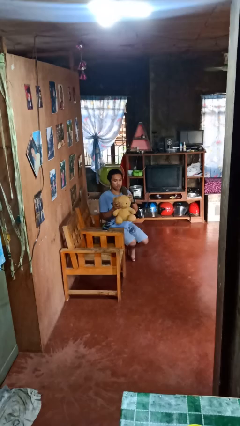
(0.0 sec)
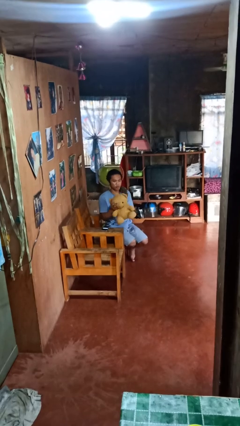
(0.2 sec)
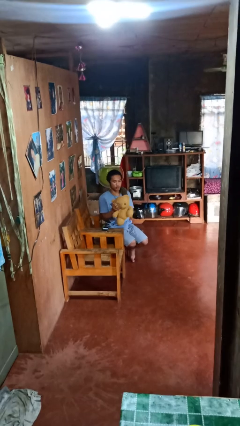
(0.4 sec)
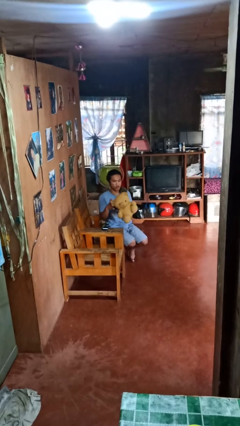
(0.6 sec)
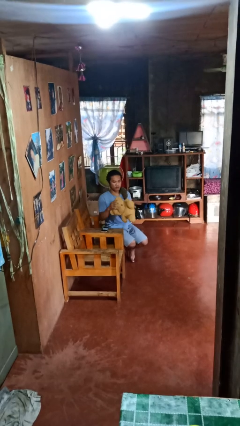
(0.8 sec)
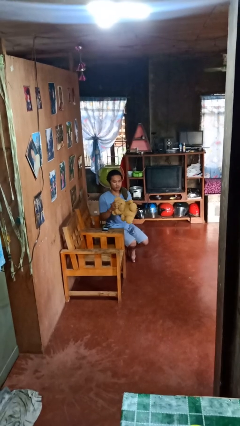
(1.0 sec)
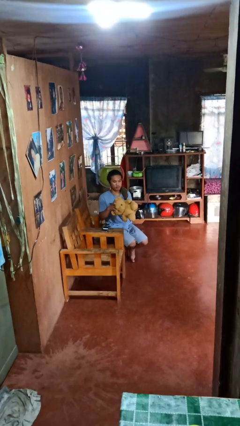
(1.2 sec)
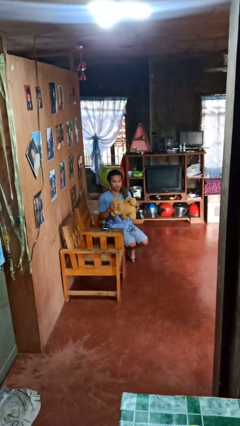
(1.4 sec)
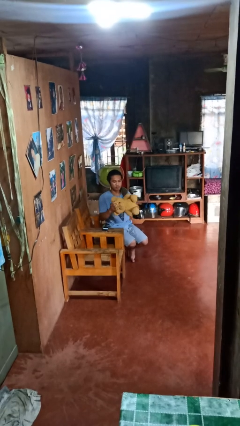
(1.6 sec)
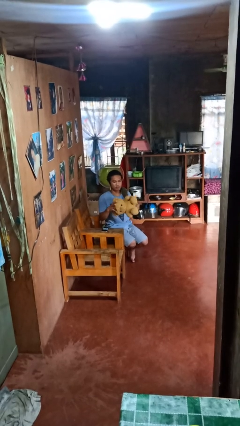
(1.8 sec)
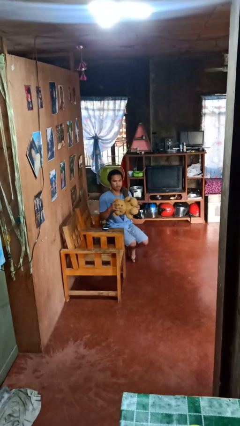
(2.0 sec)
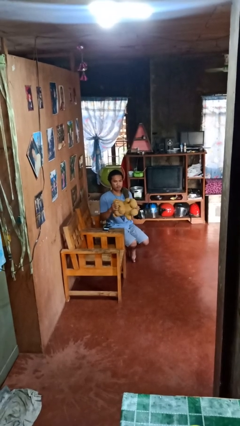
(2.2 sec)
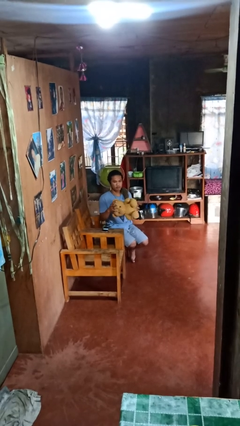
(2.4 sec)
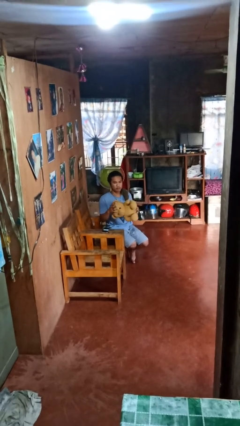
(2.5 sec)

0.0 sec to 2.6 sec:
person squeezes object

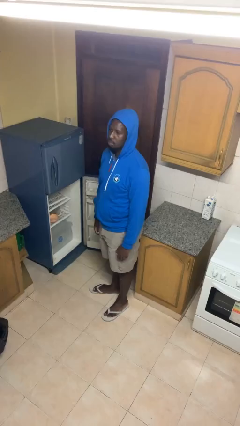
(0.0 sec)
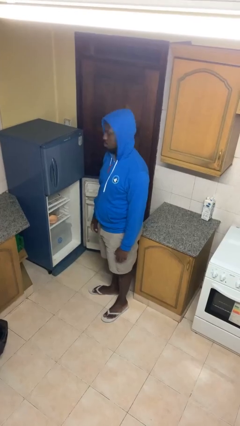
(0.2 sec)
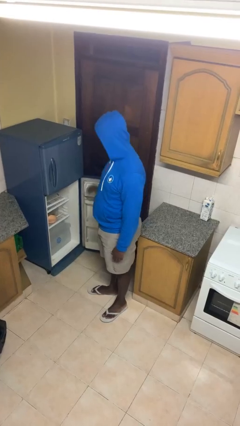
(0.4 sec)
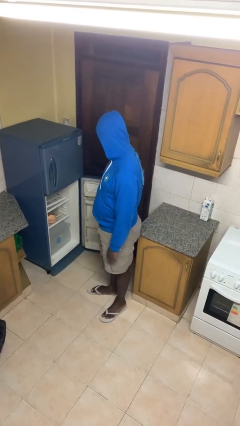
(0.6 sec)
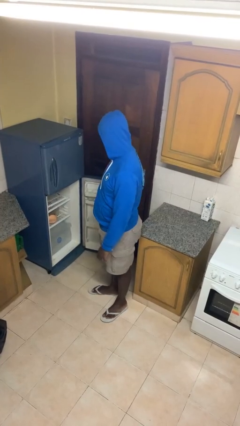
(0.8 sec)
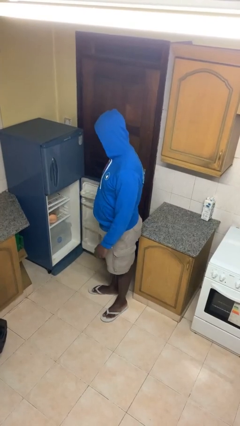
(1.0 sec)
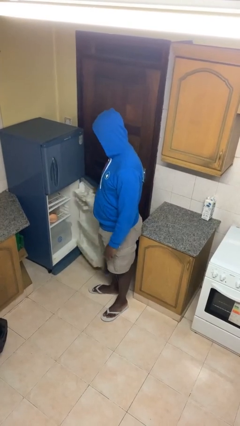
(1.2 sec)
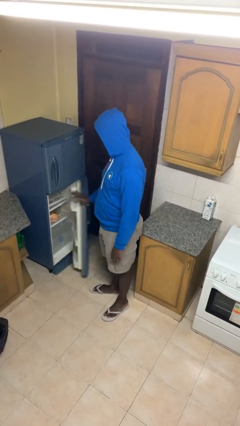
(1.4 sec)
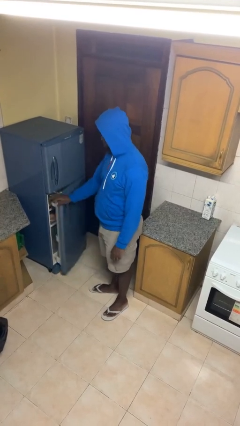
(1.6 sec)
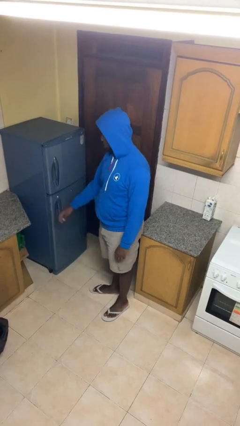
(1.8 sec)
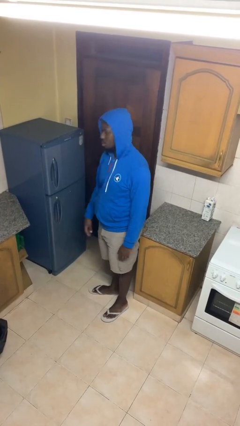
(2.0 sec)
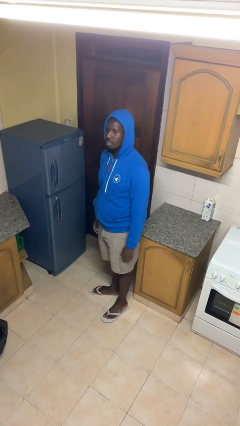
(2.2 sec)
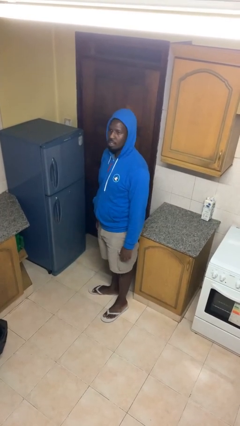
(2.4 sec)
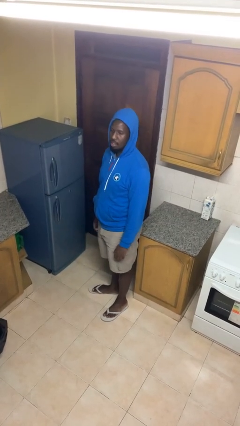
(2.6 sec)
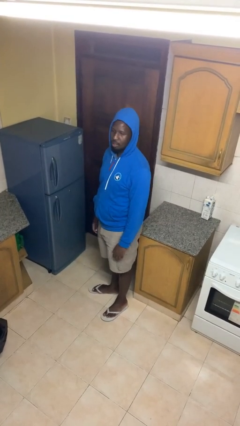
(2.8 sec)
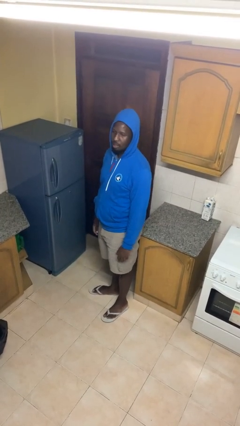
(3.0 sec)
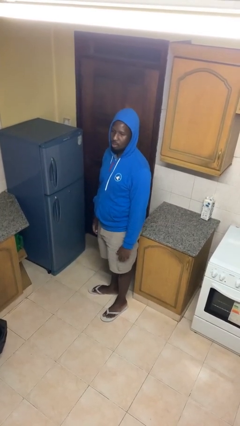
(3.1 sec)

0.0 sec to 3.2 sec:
person closes refrigerator

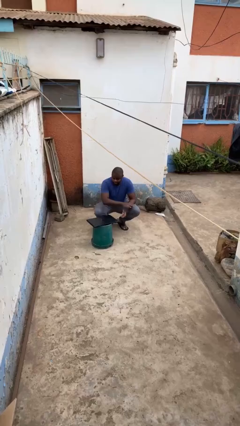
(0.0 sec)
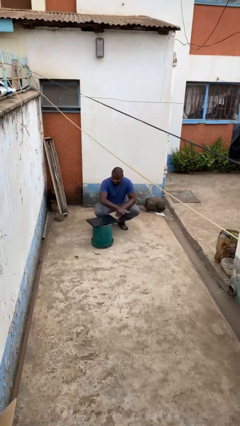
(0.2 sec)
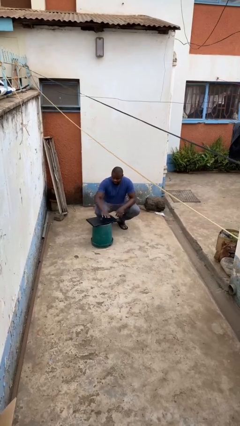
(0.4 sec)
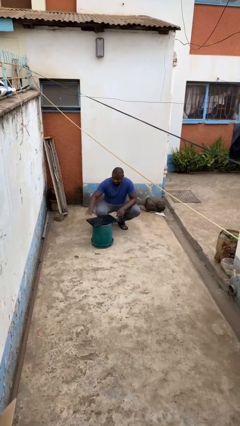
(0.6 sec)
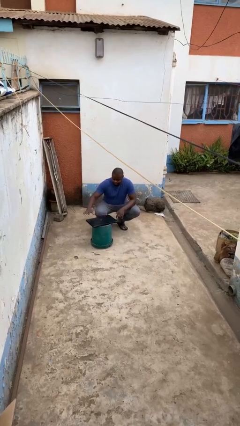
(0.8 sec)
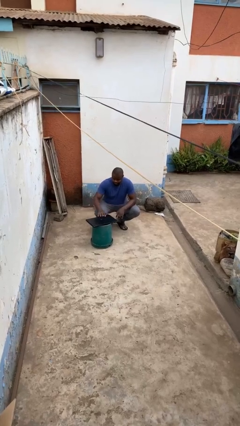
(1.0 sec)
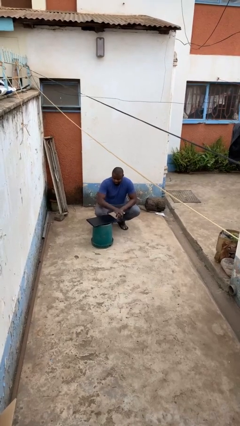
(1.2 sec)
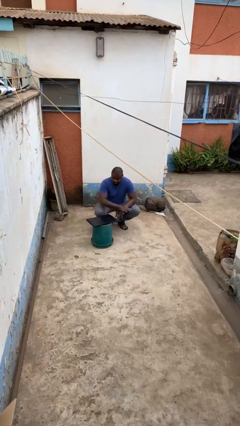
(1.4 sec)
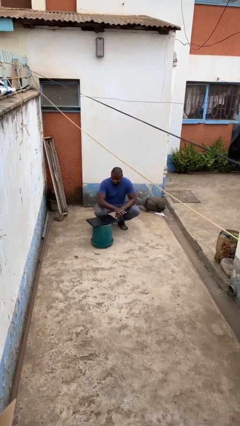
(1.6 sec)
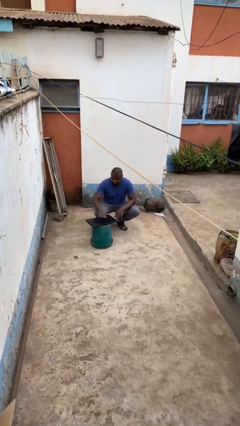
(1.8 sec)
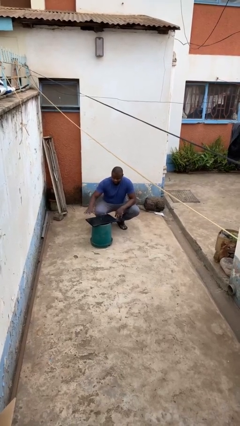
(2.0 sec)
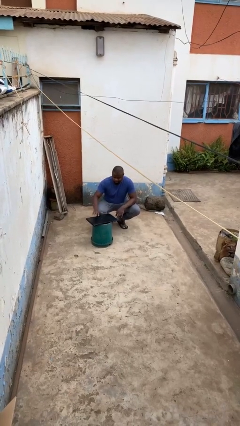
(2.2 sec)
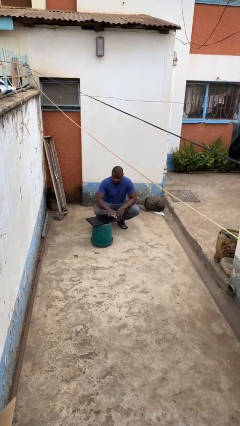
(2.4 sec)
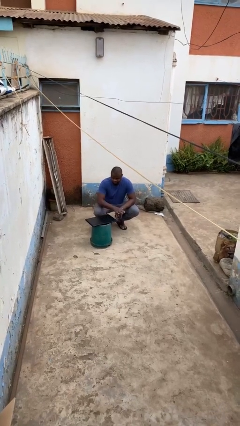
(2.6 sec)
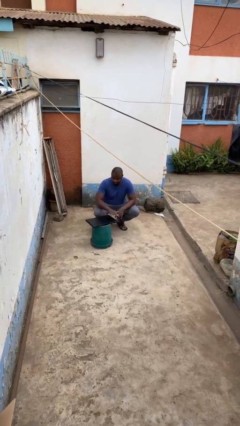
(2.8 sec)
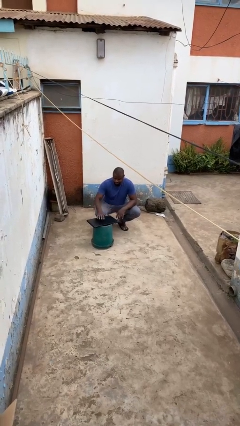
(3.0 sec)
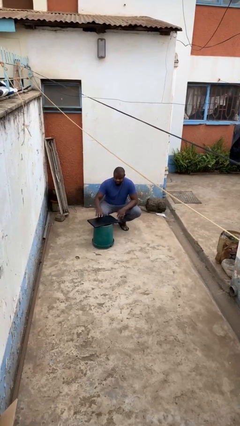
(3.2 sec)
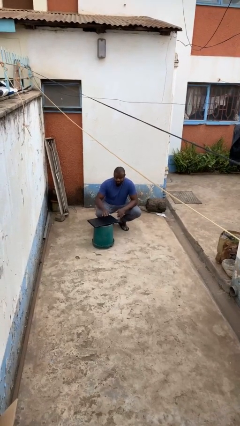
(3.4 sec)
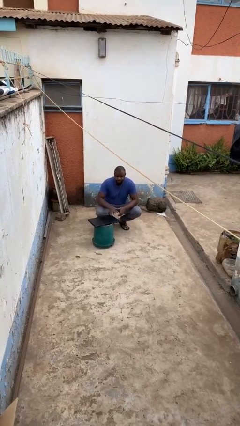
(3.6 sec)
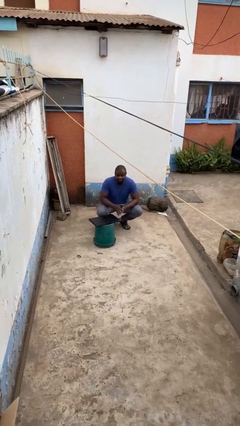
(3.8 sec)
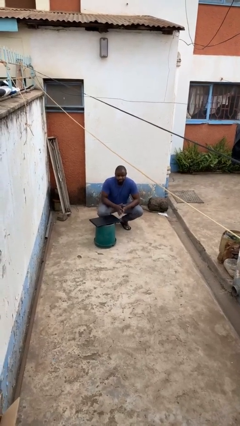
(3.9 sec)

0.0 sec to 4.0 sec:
person waves hand over object

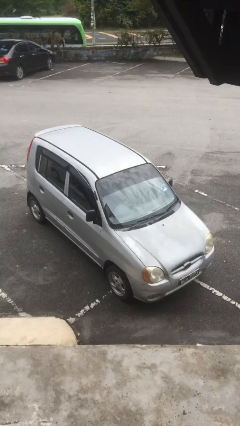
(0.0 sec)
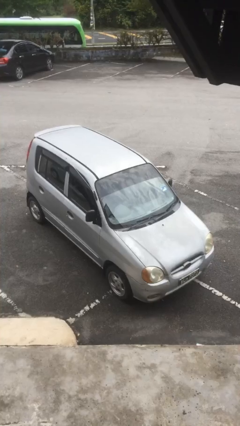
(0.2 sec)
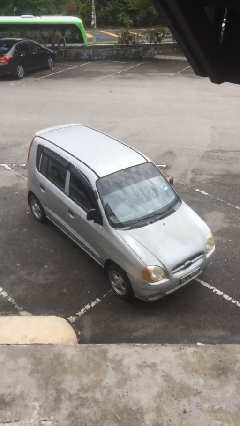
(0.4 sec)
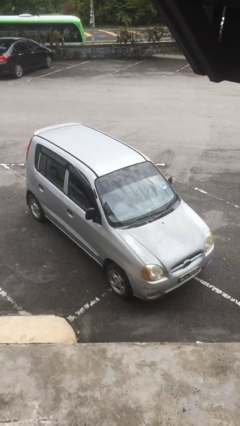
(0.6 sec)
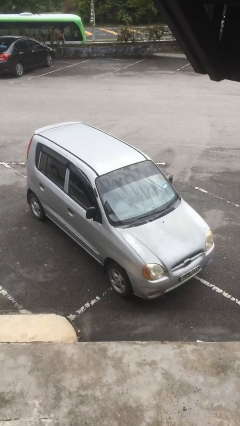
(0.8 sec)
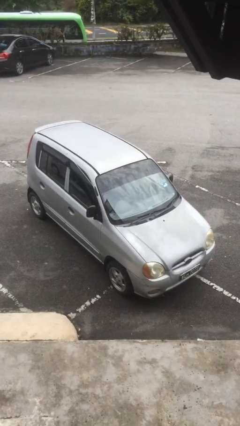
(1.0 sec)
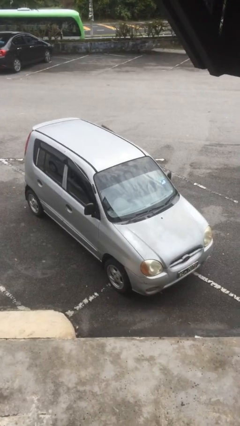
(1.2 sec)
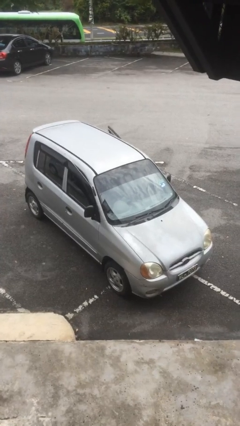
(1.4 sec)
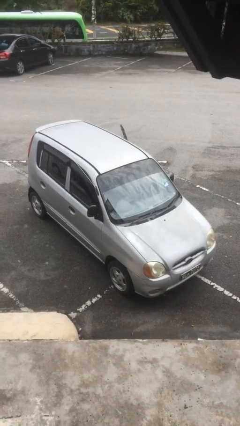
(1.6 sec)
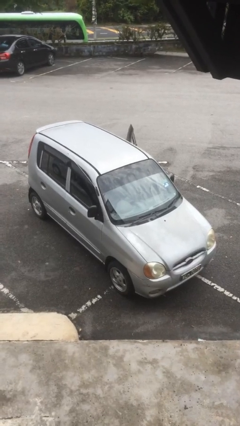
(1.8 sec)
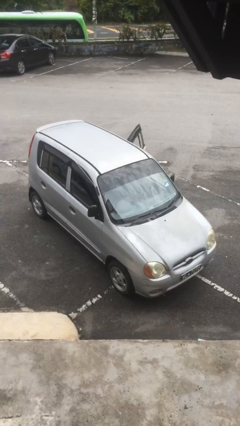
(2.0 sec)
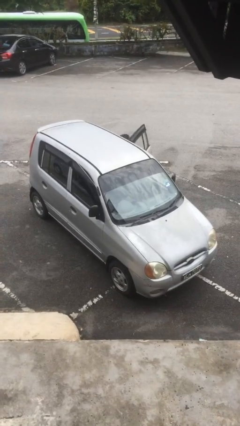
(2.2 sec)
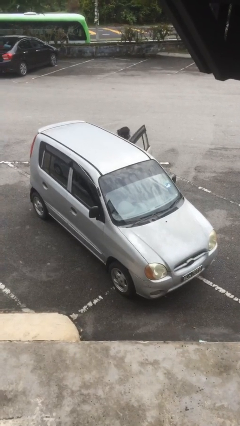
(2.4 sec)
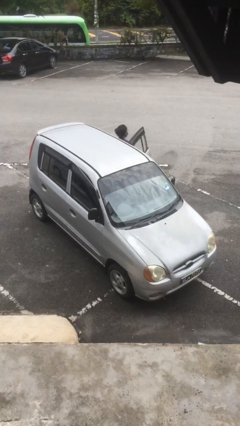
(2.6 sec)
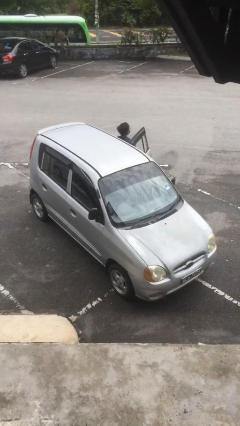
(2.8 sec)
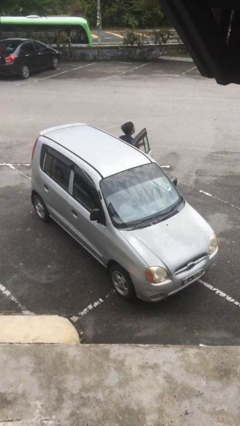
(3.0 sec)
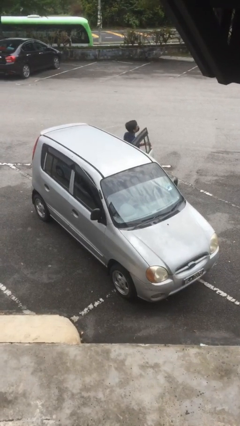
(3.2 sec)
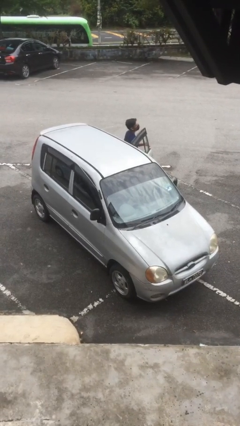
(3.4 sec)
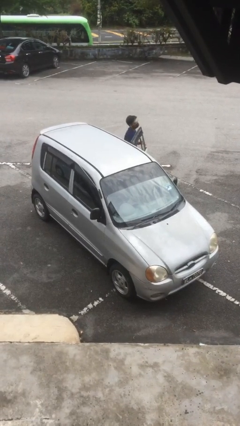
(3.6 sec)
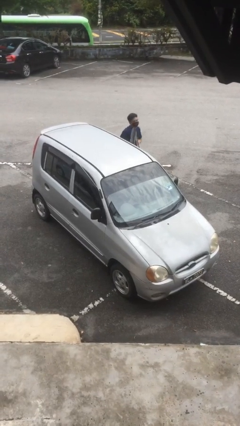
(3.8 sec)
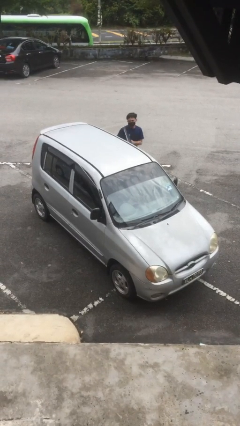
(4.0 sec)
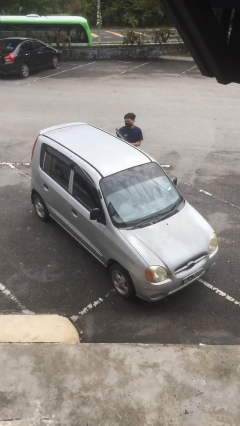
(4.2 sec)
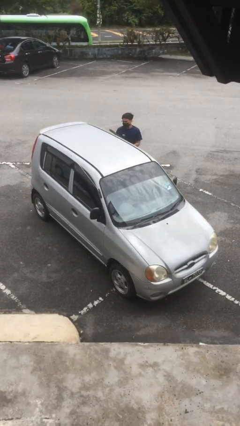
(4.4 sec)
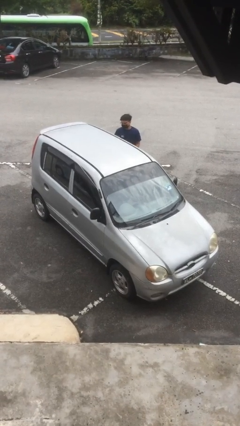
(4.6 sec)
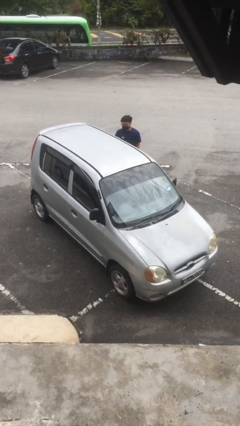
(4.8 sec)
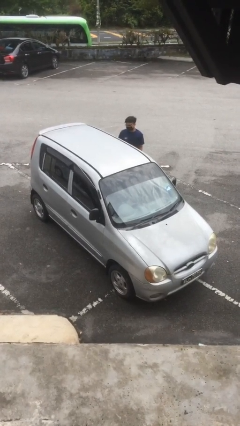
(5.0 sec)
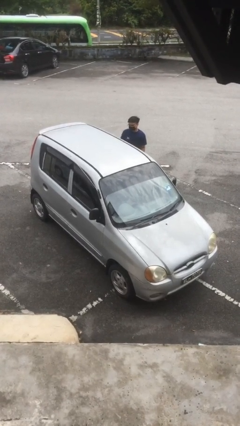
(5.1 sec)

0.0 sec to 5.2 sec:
car drops off person

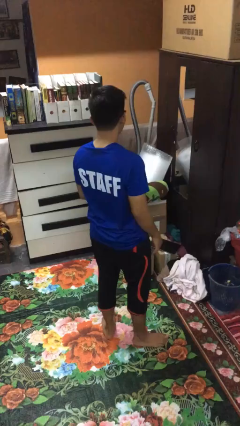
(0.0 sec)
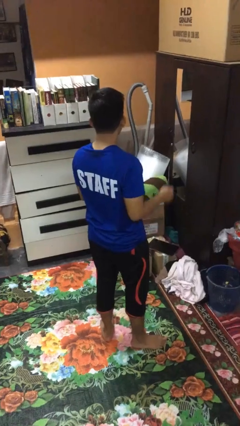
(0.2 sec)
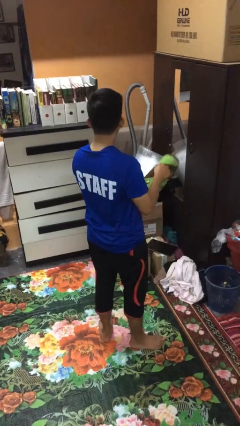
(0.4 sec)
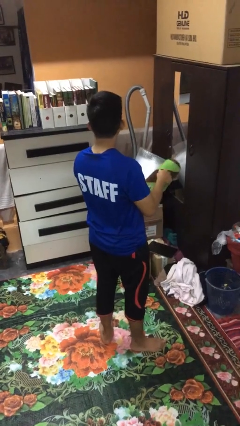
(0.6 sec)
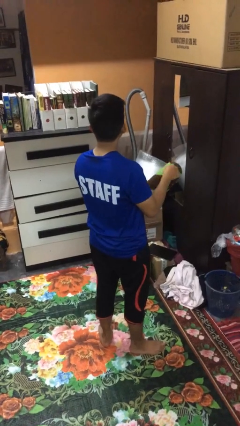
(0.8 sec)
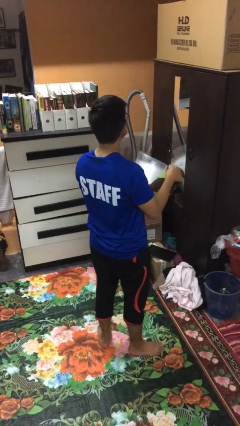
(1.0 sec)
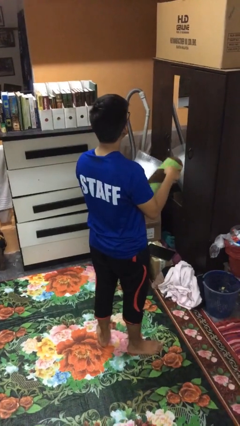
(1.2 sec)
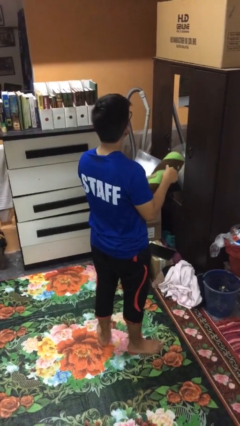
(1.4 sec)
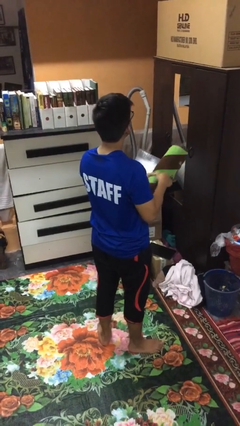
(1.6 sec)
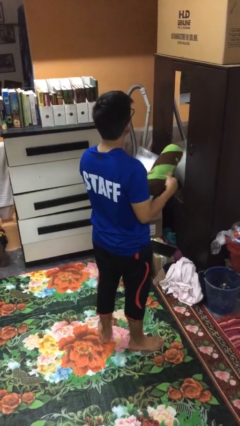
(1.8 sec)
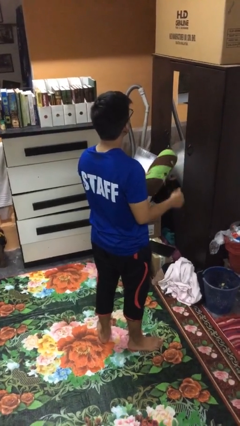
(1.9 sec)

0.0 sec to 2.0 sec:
person taps object with finger
